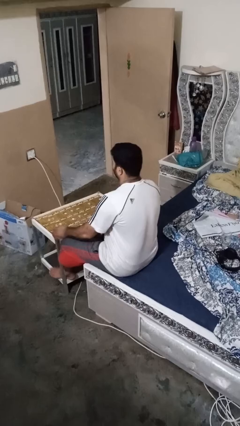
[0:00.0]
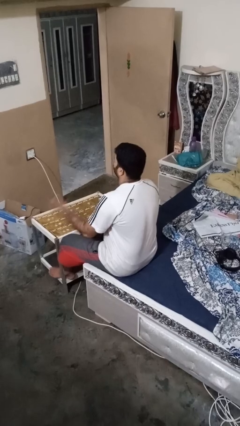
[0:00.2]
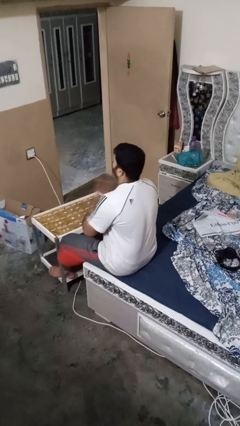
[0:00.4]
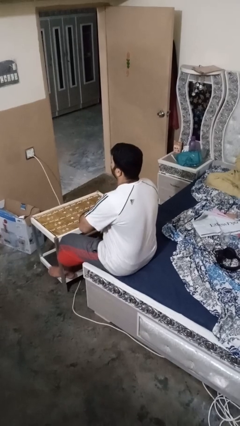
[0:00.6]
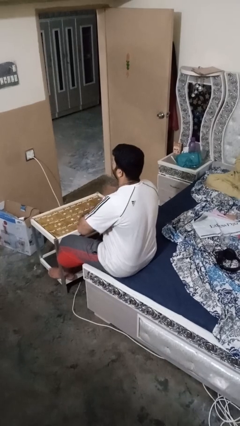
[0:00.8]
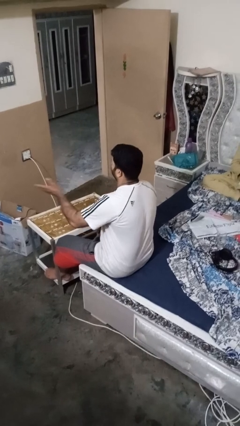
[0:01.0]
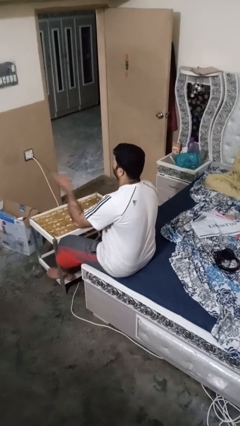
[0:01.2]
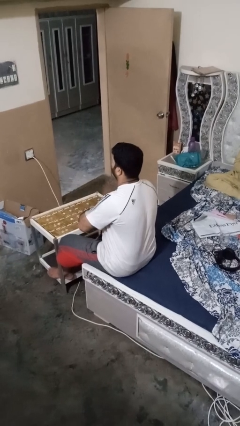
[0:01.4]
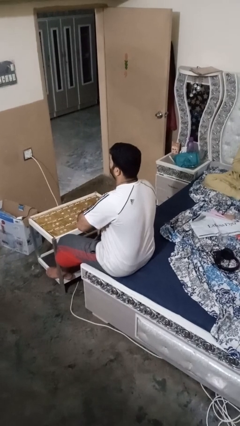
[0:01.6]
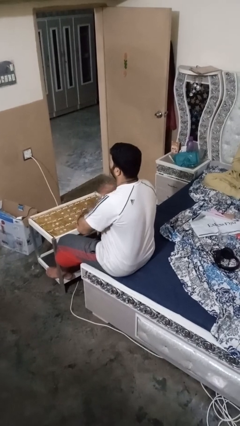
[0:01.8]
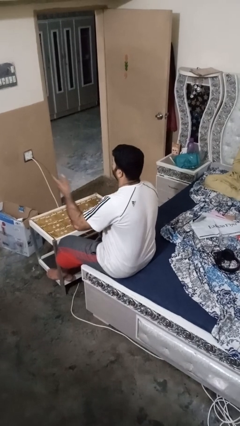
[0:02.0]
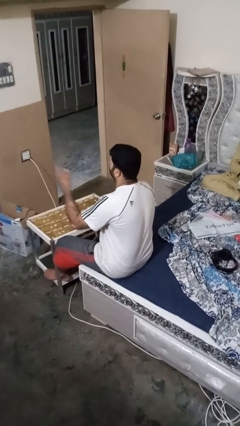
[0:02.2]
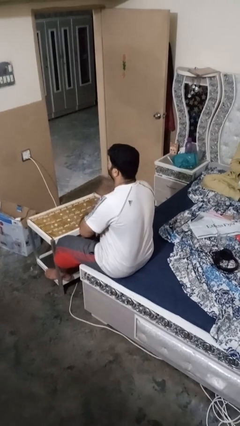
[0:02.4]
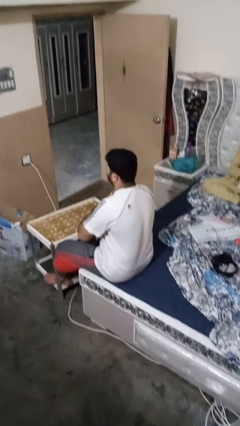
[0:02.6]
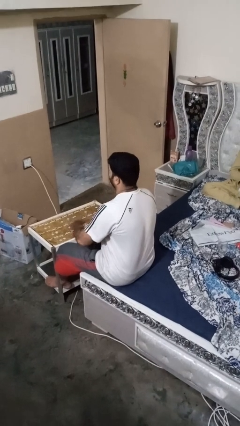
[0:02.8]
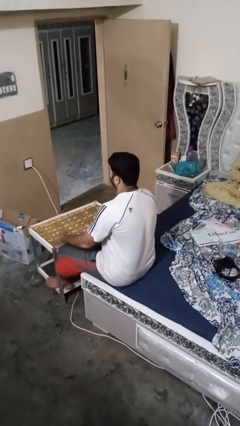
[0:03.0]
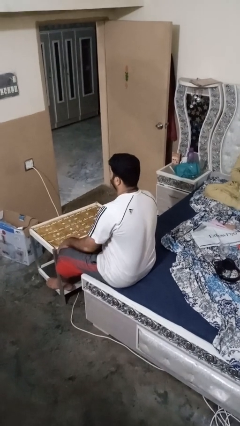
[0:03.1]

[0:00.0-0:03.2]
person drums on chest

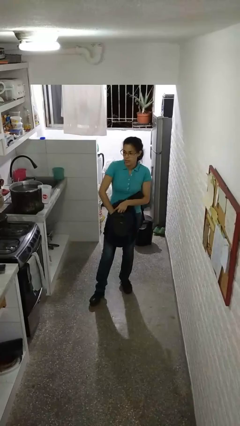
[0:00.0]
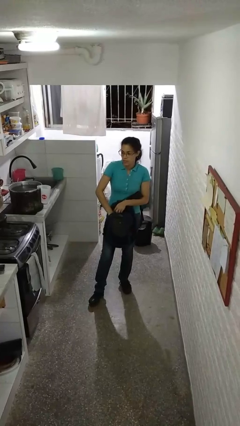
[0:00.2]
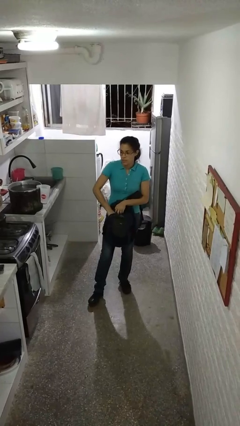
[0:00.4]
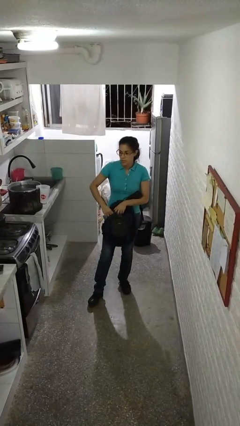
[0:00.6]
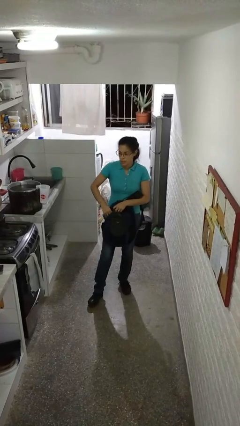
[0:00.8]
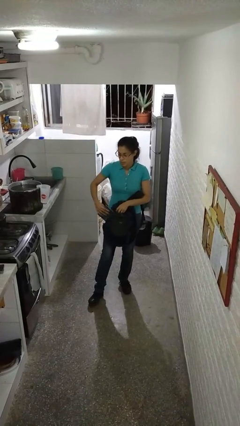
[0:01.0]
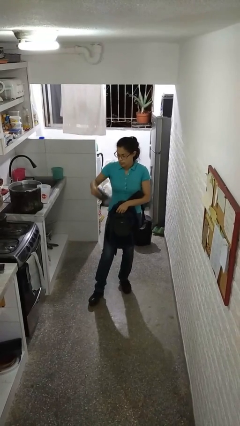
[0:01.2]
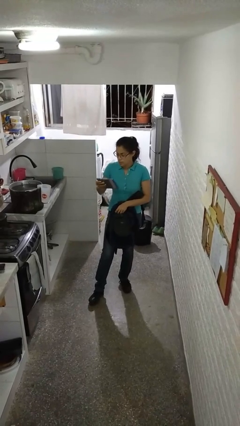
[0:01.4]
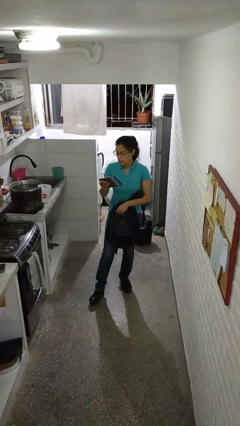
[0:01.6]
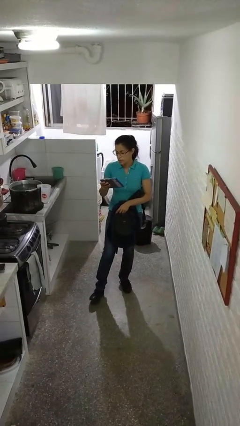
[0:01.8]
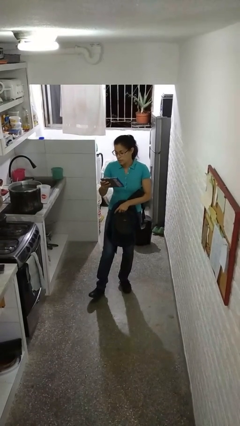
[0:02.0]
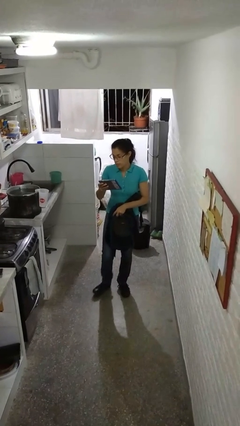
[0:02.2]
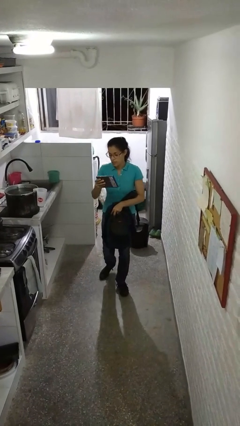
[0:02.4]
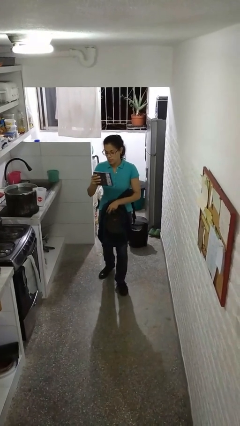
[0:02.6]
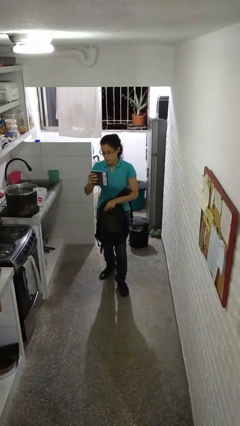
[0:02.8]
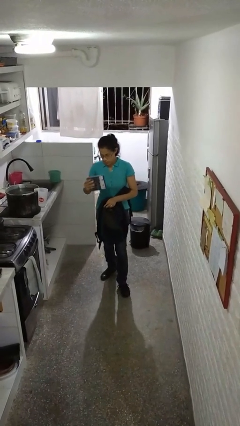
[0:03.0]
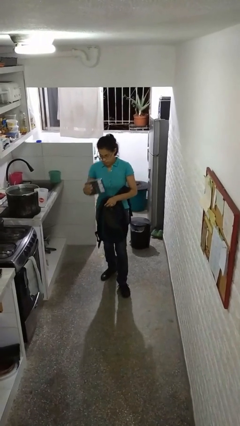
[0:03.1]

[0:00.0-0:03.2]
person takes object from backpack

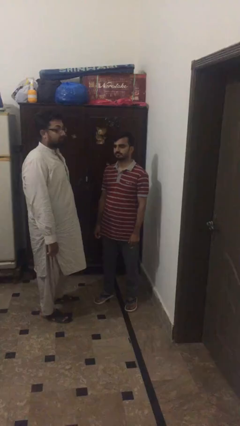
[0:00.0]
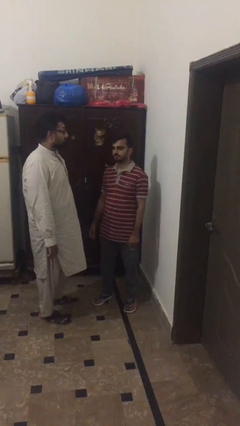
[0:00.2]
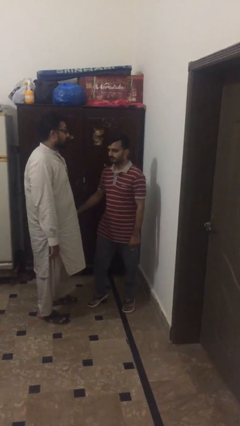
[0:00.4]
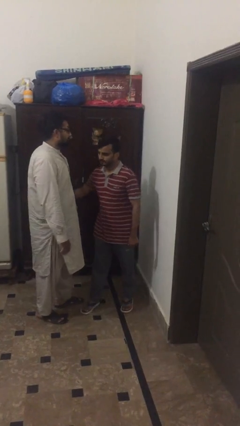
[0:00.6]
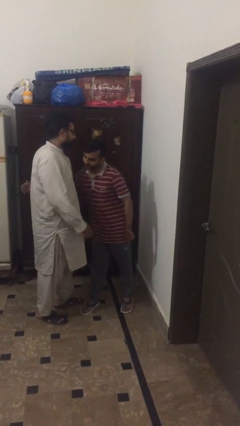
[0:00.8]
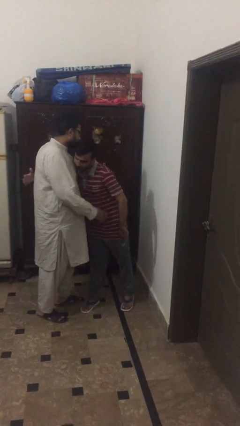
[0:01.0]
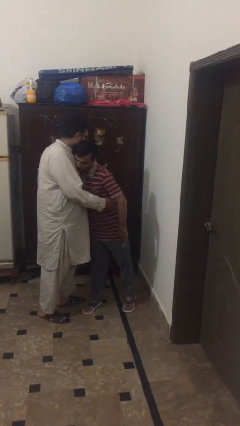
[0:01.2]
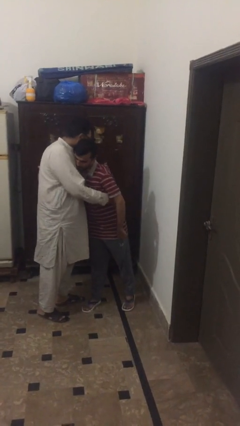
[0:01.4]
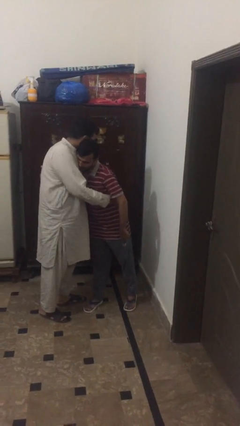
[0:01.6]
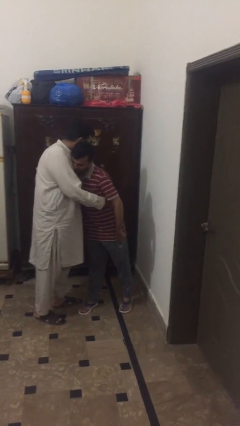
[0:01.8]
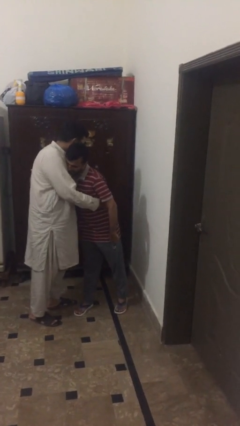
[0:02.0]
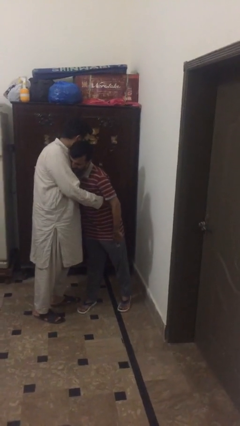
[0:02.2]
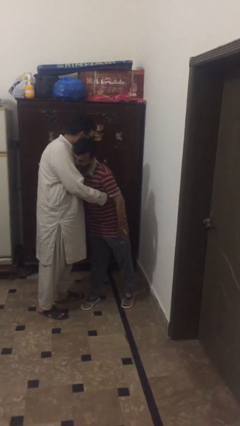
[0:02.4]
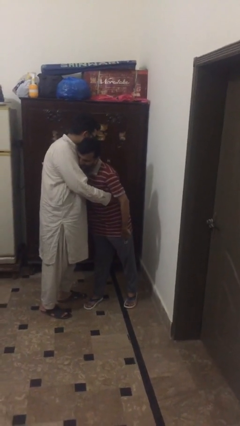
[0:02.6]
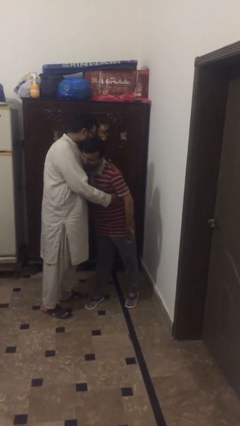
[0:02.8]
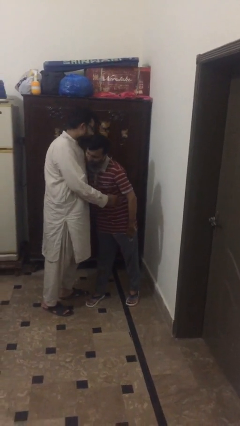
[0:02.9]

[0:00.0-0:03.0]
person embraces person

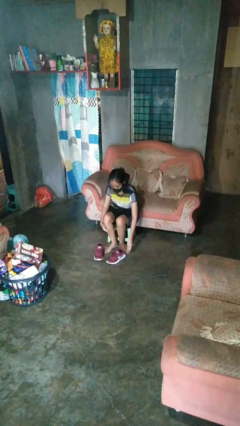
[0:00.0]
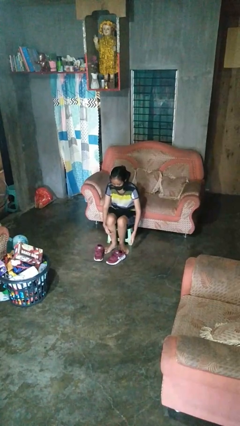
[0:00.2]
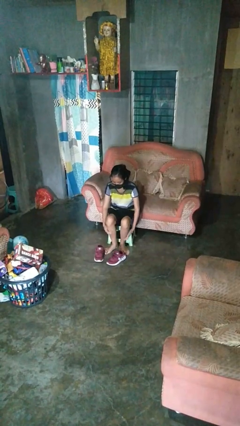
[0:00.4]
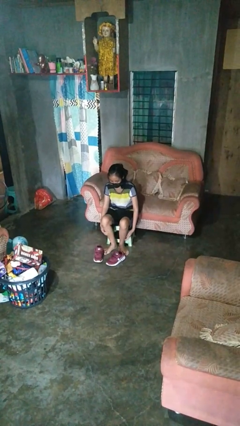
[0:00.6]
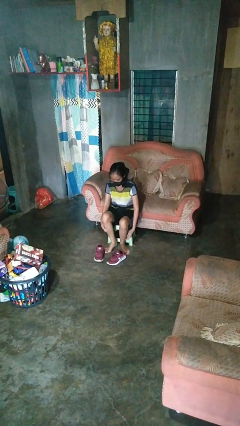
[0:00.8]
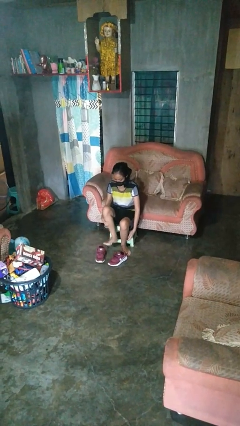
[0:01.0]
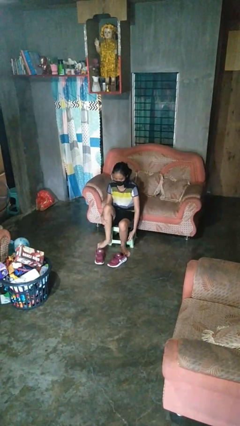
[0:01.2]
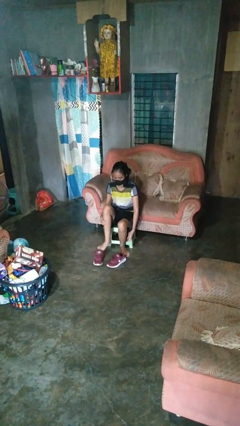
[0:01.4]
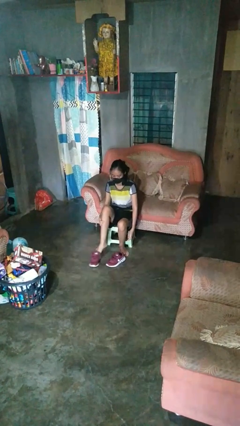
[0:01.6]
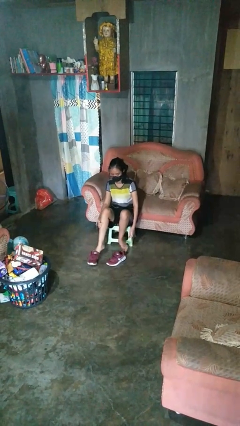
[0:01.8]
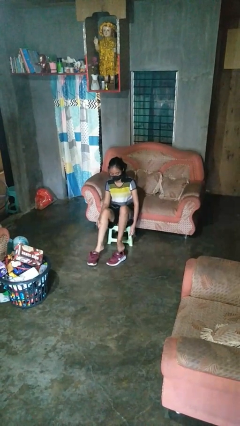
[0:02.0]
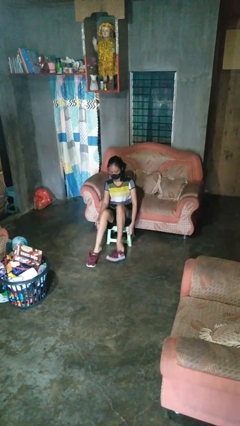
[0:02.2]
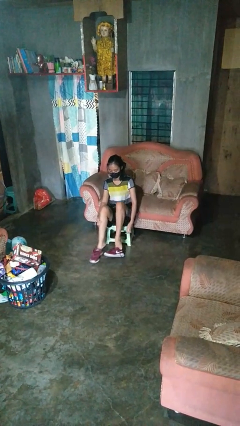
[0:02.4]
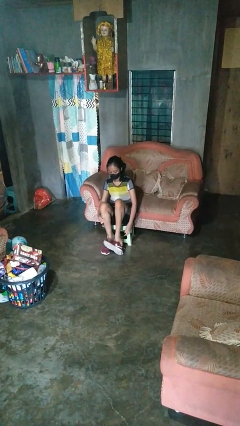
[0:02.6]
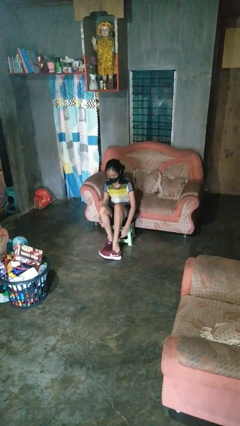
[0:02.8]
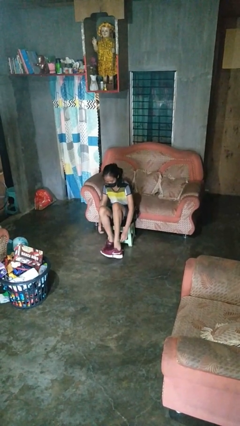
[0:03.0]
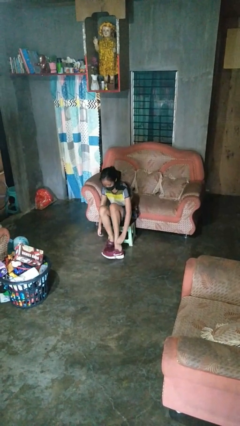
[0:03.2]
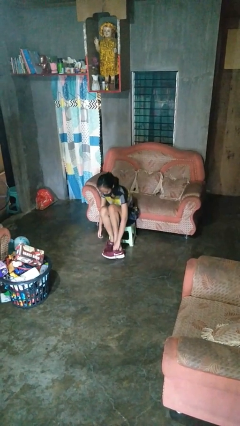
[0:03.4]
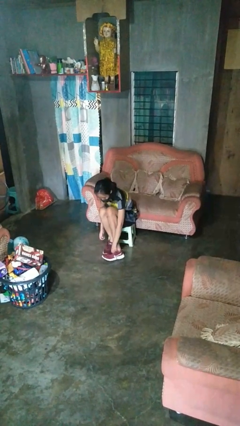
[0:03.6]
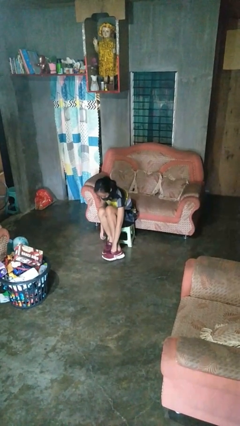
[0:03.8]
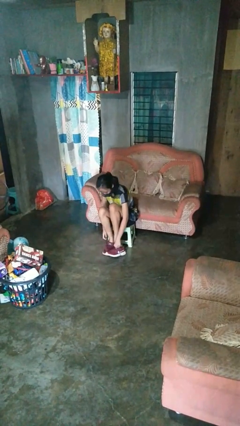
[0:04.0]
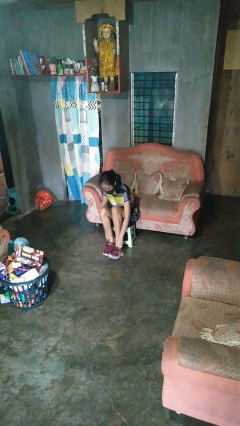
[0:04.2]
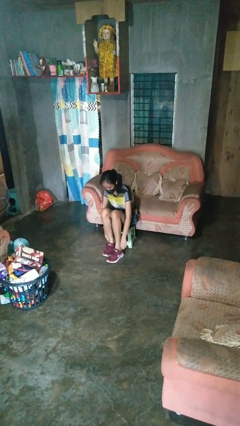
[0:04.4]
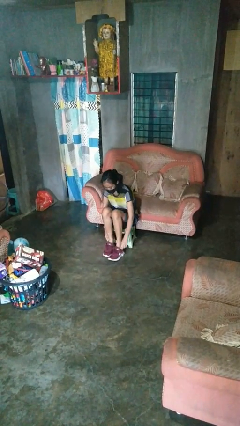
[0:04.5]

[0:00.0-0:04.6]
person puts on shoes

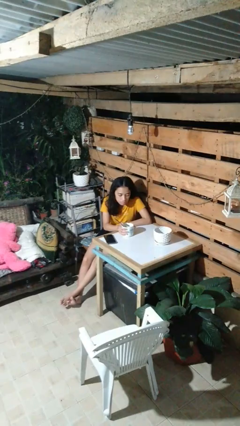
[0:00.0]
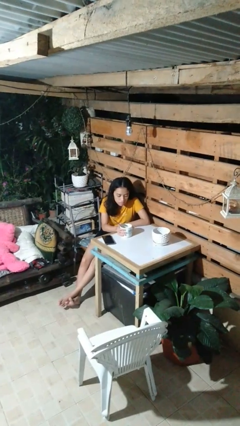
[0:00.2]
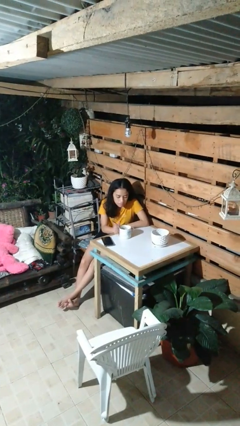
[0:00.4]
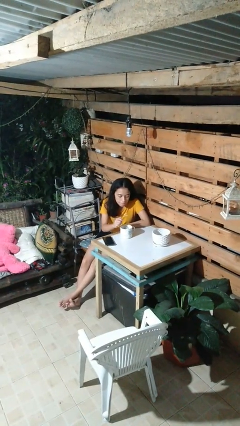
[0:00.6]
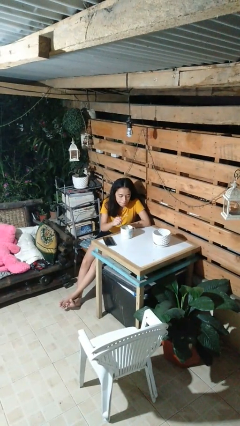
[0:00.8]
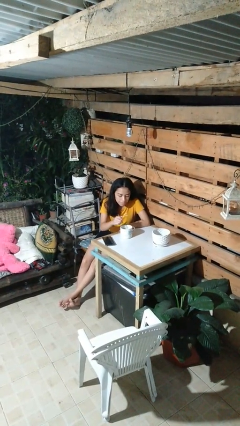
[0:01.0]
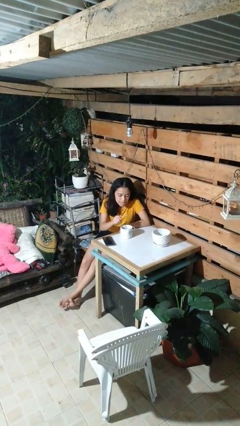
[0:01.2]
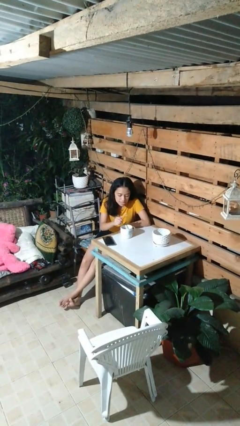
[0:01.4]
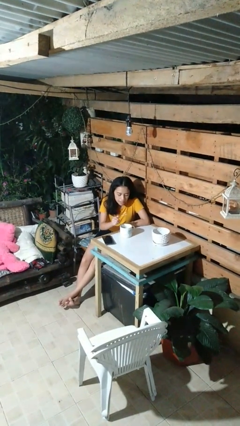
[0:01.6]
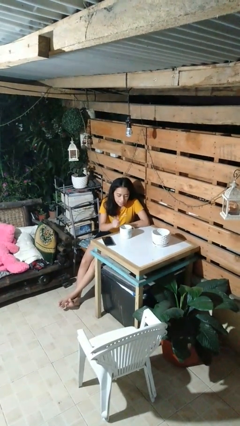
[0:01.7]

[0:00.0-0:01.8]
person stirs mug

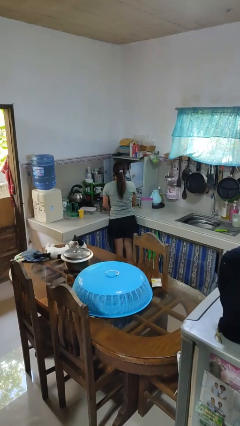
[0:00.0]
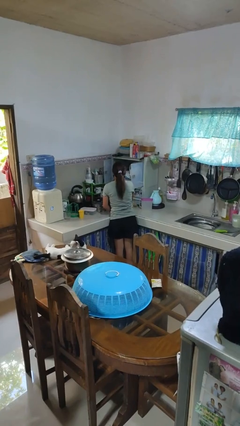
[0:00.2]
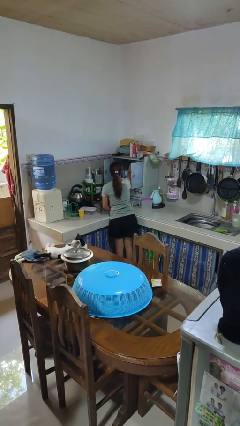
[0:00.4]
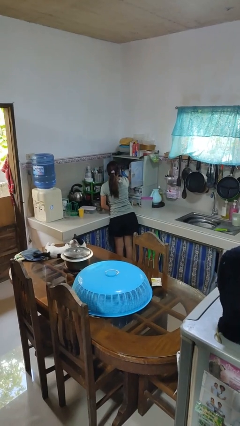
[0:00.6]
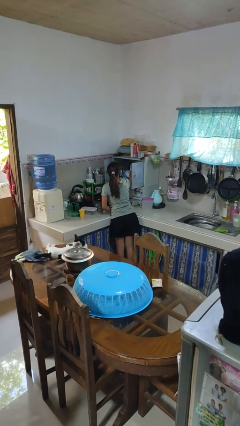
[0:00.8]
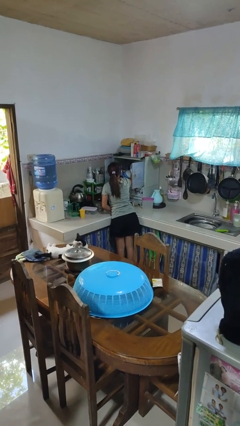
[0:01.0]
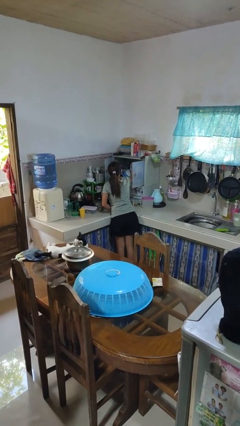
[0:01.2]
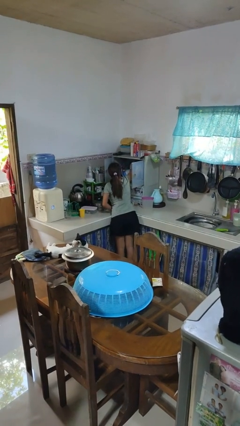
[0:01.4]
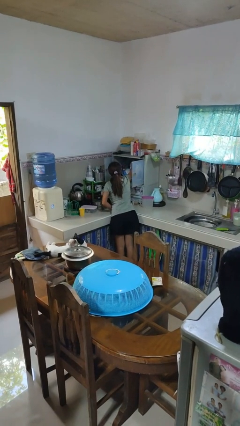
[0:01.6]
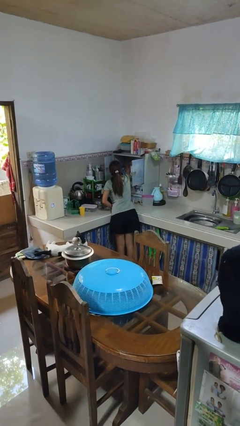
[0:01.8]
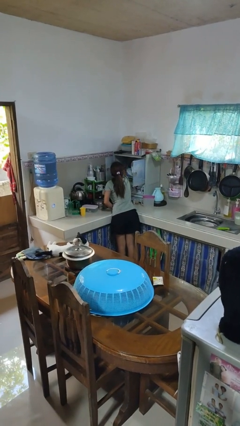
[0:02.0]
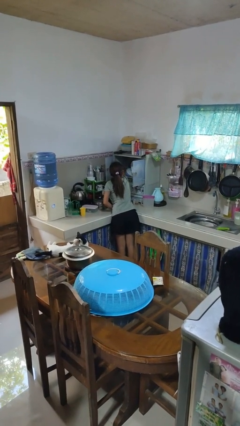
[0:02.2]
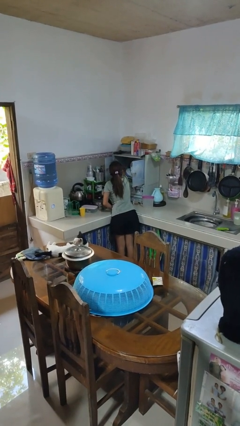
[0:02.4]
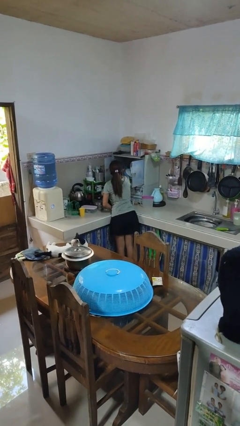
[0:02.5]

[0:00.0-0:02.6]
person searches in kitchen drawer
